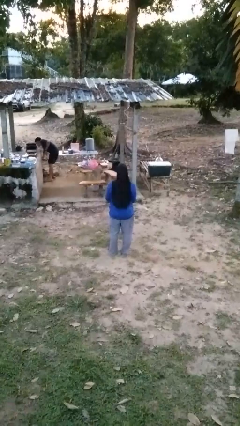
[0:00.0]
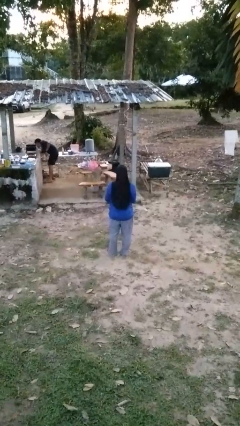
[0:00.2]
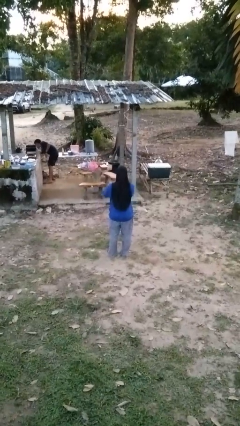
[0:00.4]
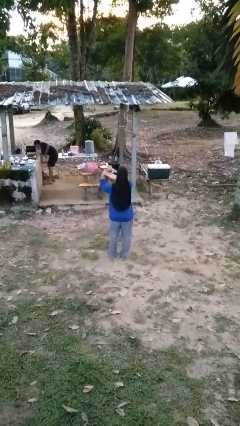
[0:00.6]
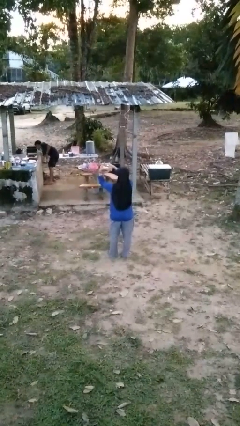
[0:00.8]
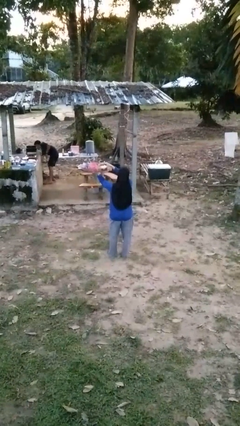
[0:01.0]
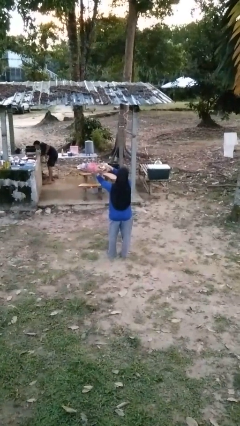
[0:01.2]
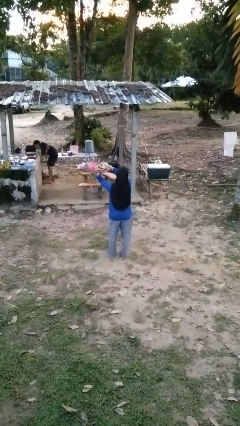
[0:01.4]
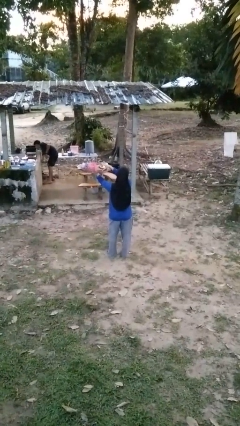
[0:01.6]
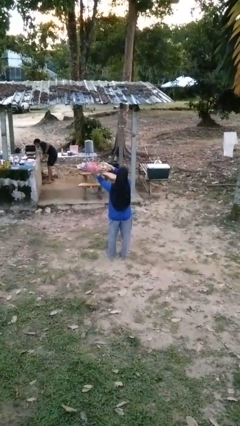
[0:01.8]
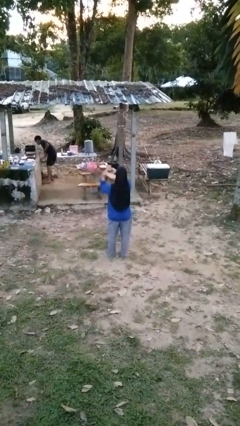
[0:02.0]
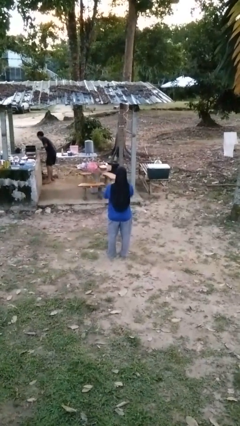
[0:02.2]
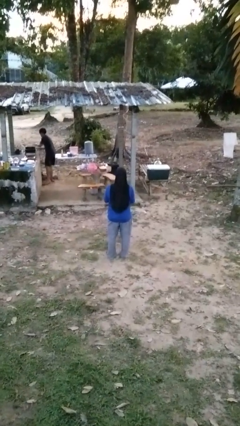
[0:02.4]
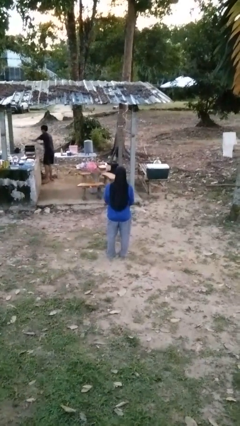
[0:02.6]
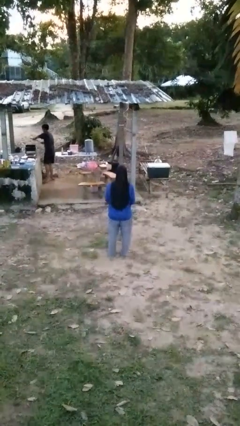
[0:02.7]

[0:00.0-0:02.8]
person gestures heart

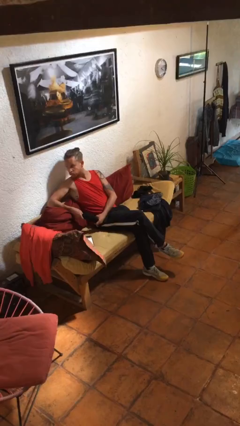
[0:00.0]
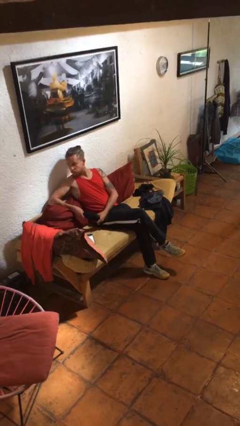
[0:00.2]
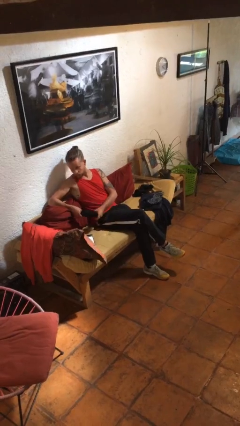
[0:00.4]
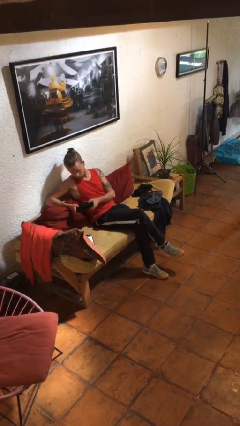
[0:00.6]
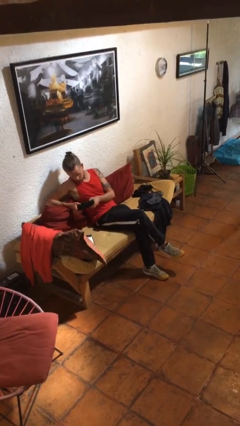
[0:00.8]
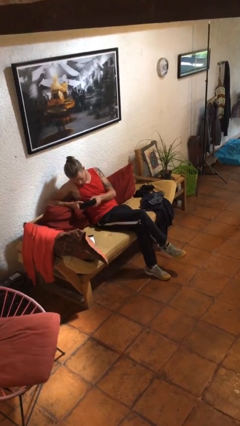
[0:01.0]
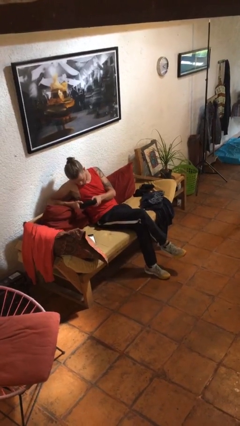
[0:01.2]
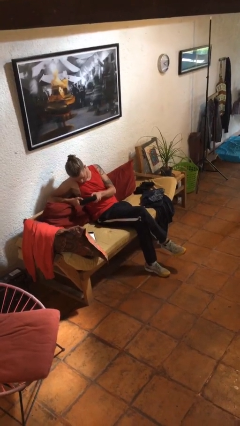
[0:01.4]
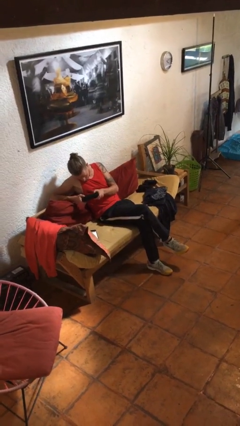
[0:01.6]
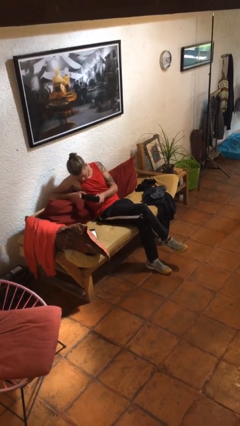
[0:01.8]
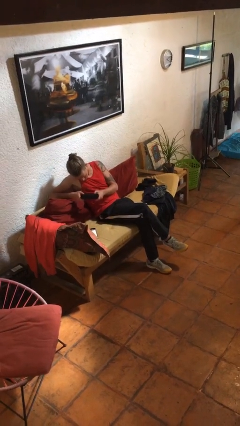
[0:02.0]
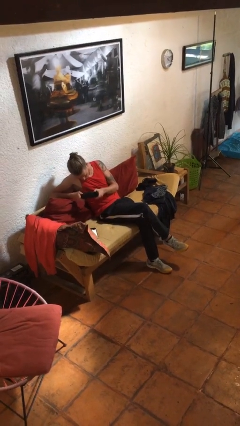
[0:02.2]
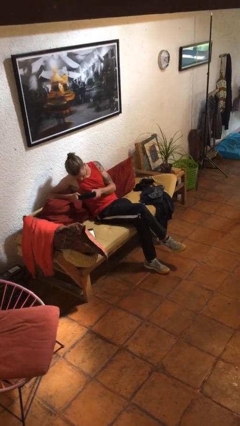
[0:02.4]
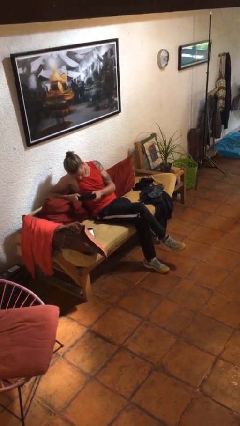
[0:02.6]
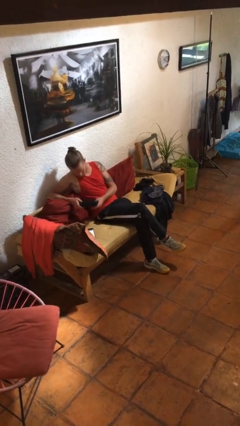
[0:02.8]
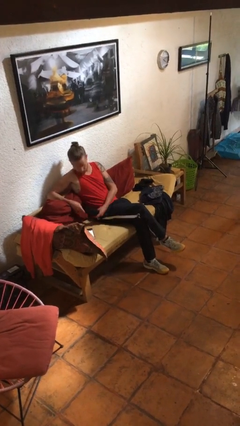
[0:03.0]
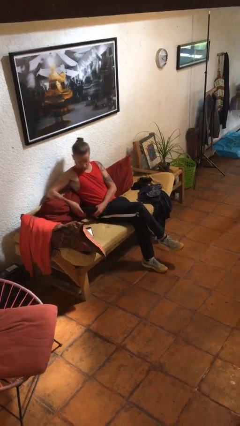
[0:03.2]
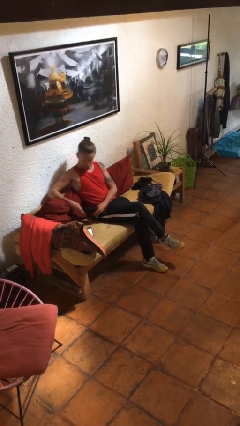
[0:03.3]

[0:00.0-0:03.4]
person interacts with handheld game

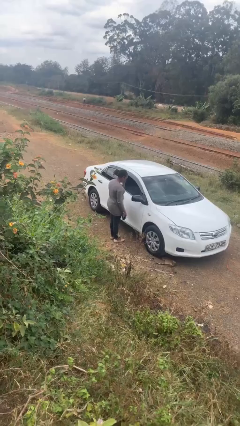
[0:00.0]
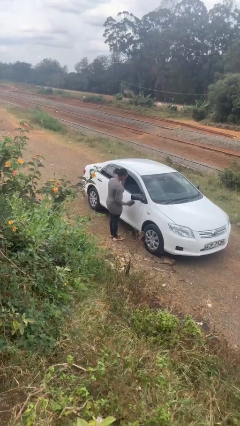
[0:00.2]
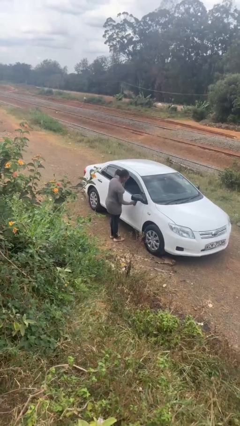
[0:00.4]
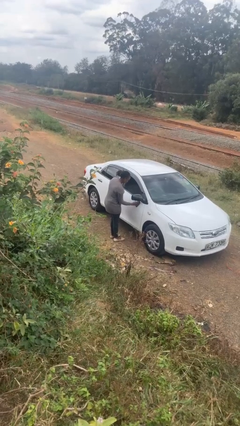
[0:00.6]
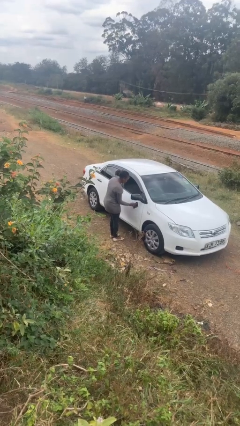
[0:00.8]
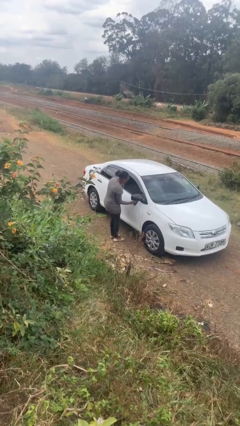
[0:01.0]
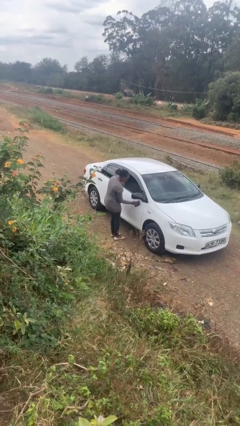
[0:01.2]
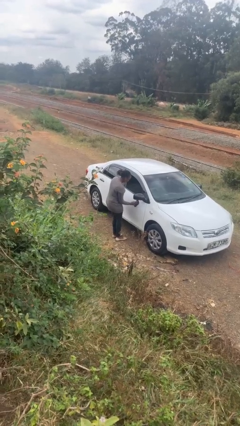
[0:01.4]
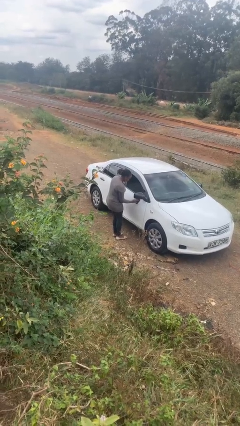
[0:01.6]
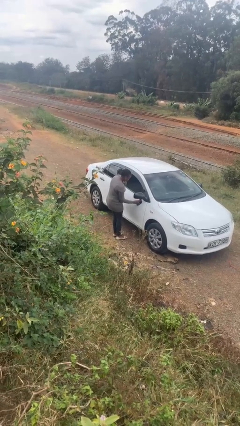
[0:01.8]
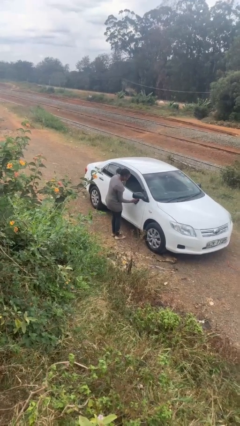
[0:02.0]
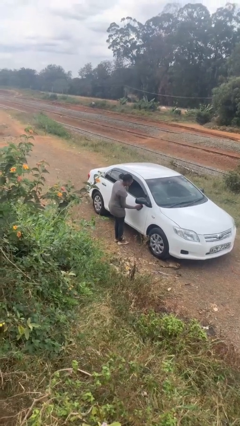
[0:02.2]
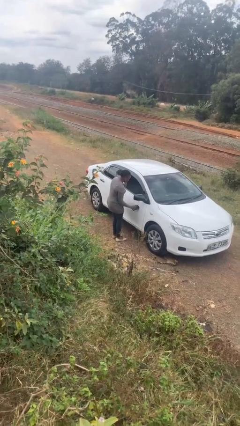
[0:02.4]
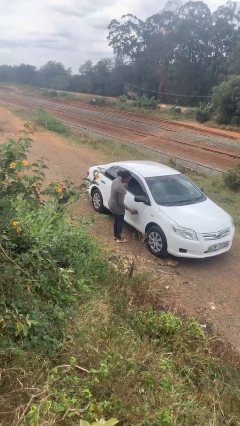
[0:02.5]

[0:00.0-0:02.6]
person polishes car with rag

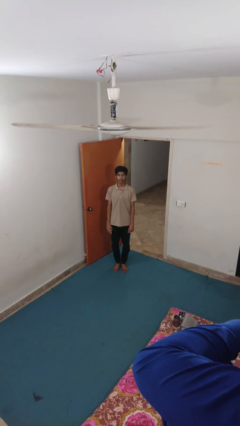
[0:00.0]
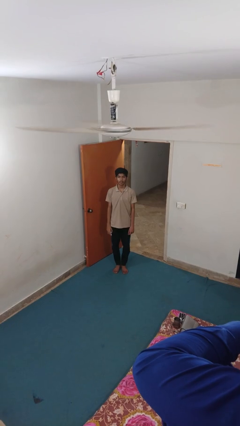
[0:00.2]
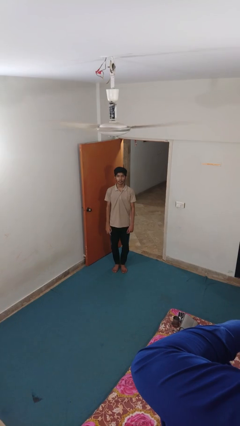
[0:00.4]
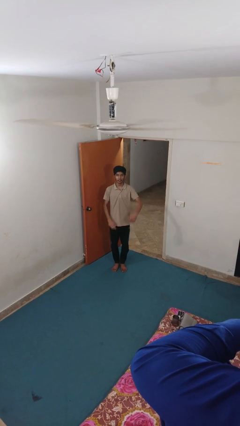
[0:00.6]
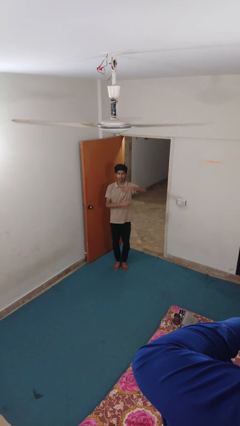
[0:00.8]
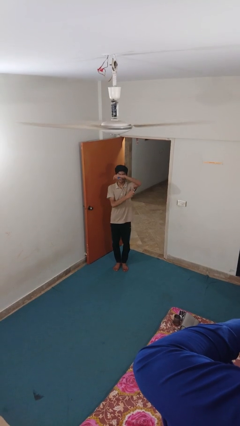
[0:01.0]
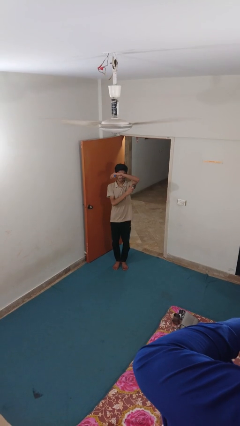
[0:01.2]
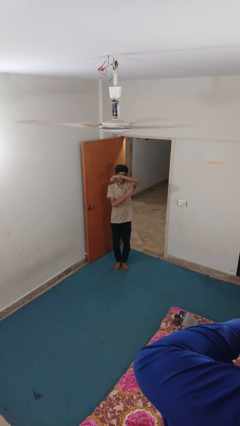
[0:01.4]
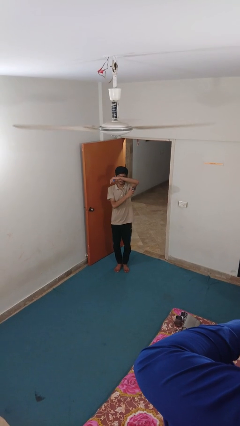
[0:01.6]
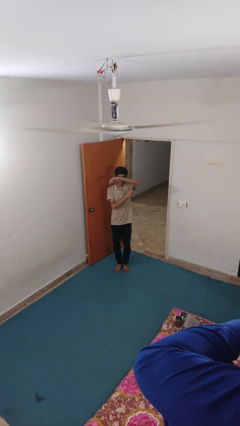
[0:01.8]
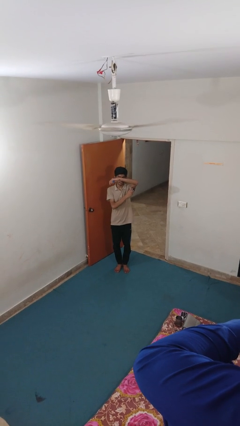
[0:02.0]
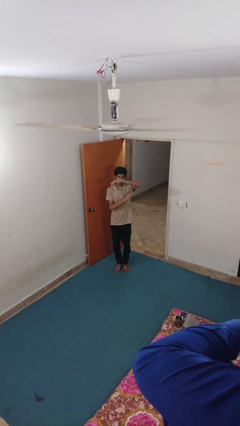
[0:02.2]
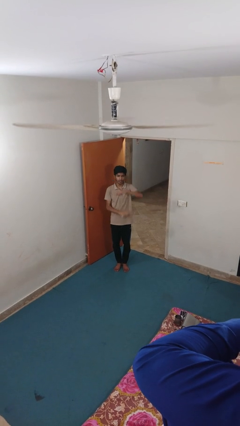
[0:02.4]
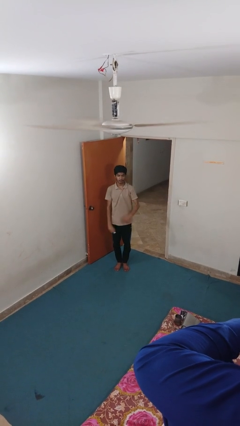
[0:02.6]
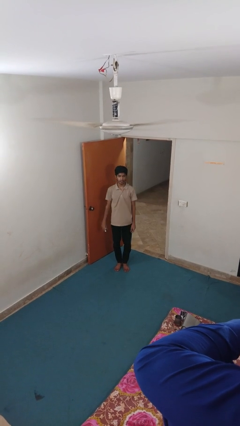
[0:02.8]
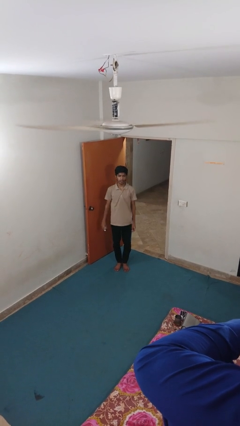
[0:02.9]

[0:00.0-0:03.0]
person applies deodorant

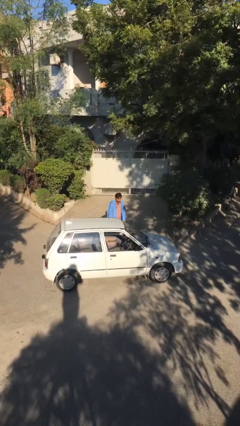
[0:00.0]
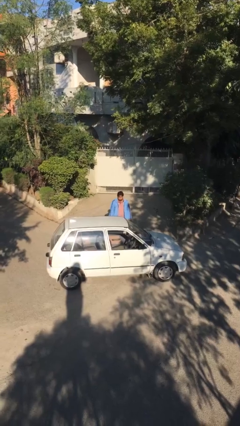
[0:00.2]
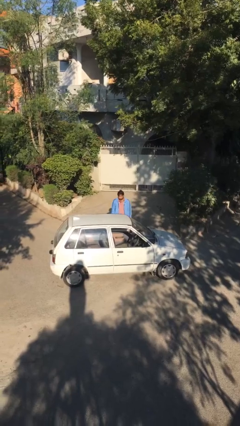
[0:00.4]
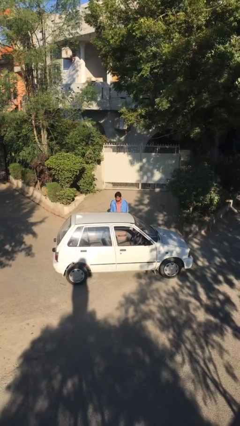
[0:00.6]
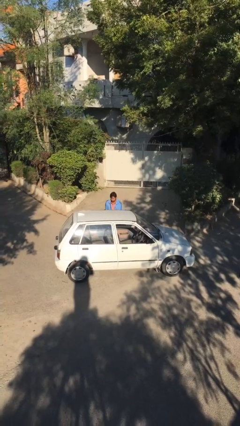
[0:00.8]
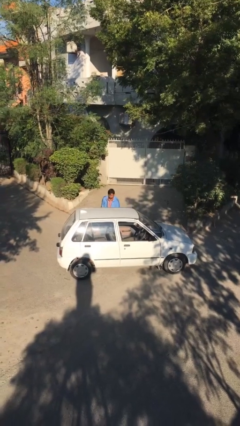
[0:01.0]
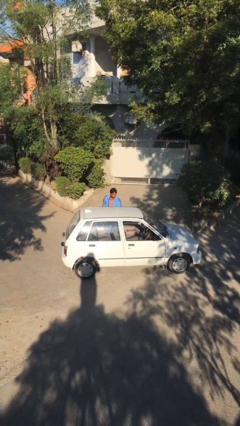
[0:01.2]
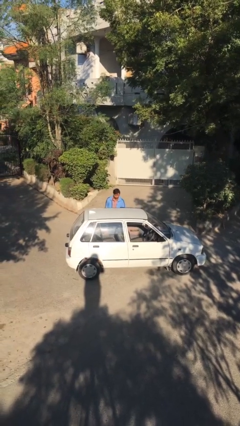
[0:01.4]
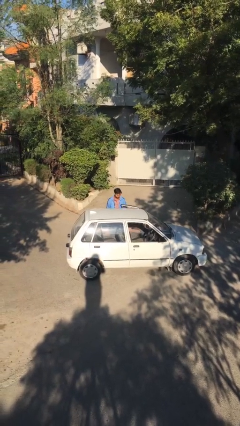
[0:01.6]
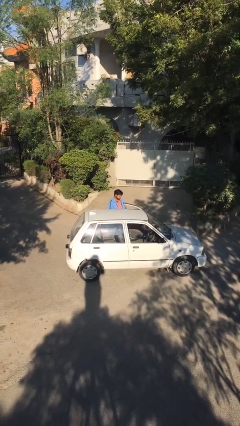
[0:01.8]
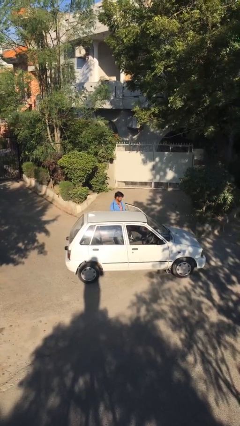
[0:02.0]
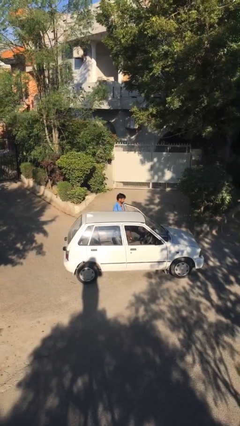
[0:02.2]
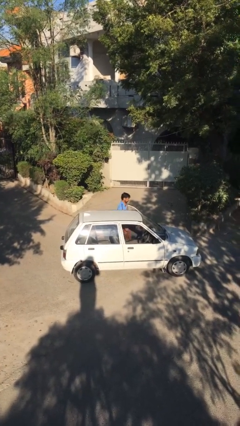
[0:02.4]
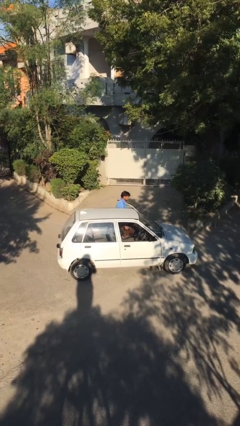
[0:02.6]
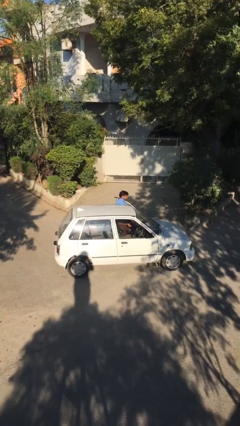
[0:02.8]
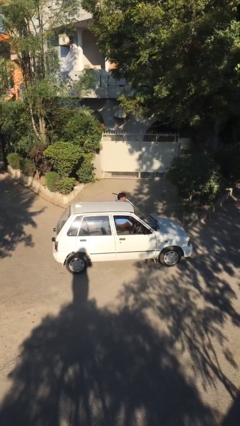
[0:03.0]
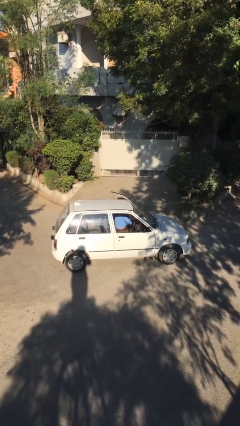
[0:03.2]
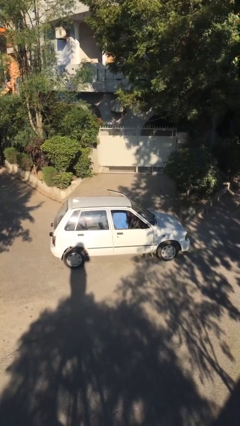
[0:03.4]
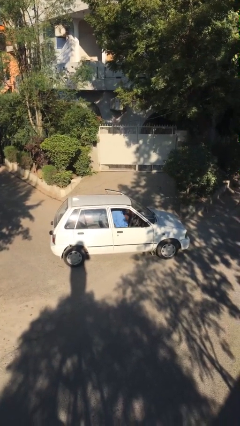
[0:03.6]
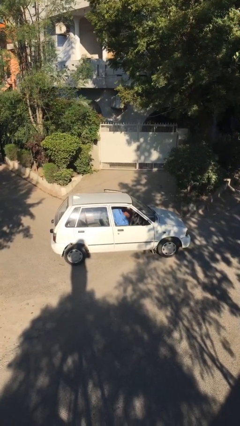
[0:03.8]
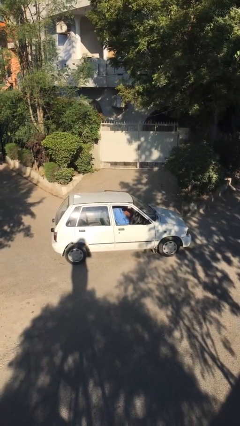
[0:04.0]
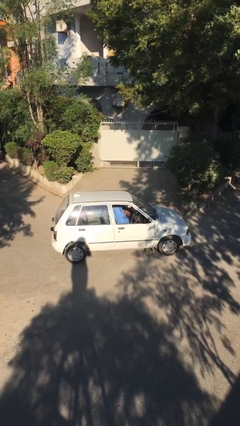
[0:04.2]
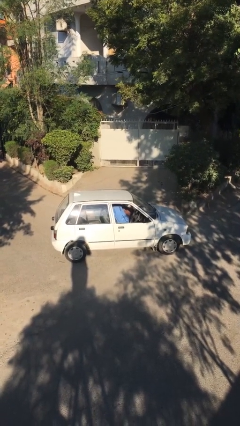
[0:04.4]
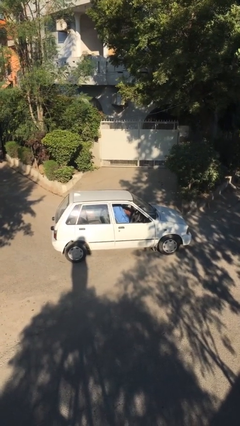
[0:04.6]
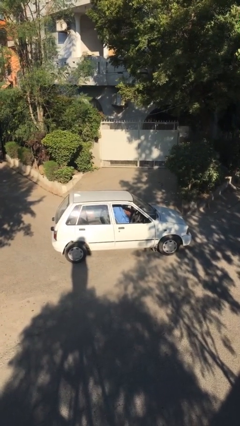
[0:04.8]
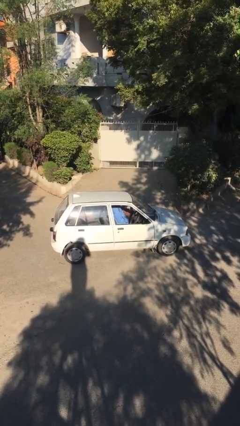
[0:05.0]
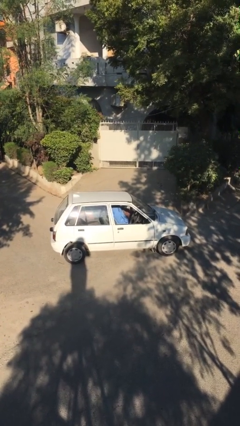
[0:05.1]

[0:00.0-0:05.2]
person enters car

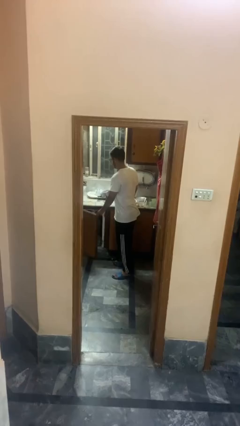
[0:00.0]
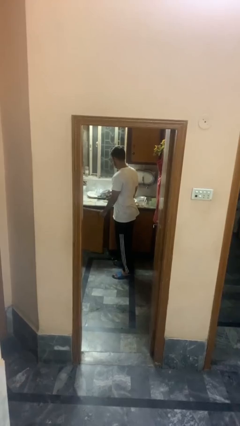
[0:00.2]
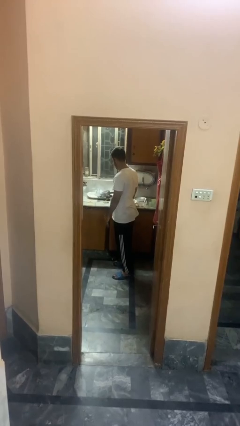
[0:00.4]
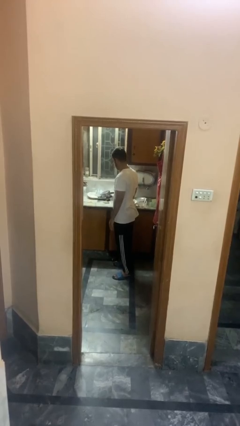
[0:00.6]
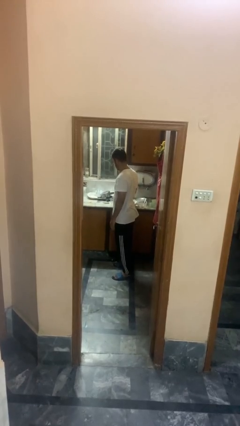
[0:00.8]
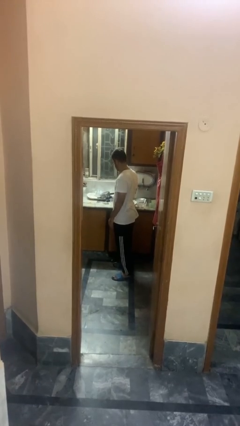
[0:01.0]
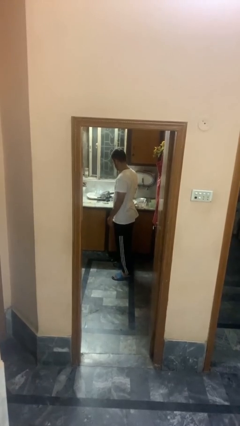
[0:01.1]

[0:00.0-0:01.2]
person closes cabinet
